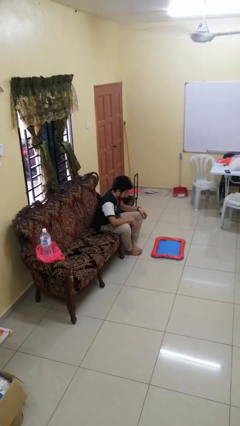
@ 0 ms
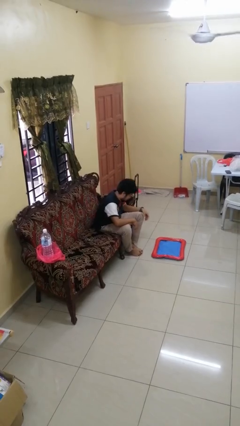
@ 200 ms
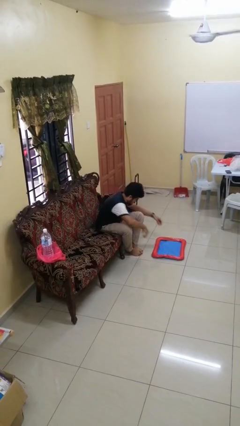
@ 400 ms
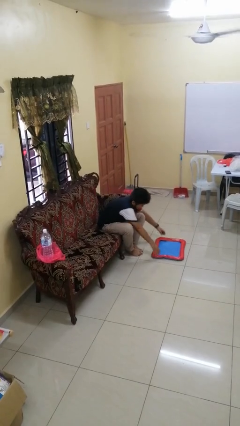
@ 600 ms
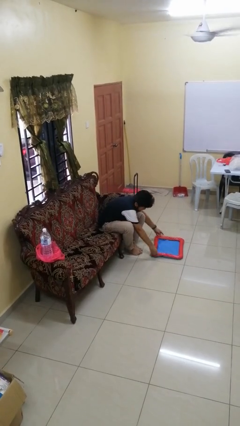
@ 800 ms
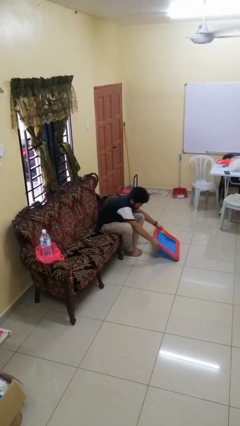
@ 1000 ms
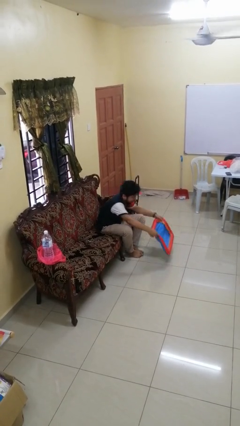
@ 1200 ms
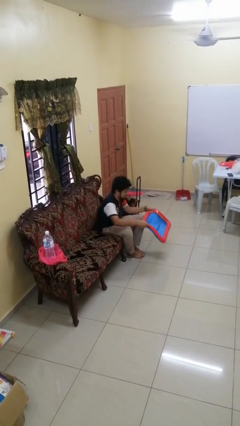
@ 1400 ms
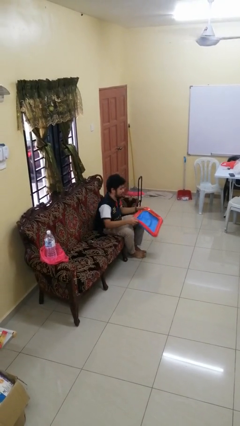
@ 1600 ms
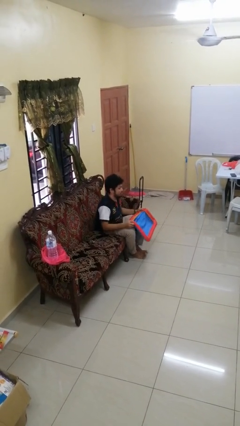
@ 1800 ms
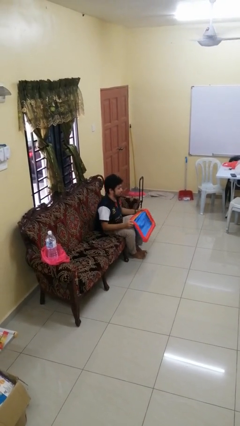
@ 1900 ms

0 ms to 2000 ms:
person picks up object from floor

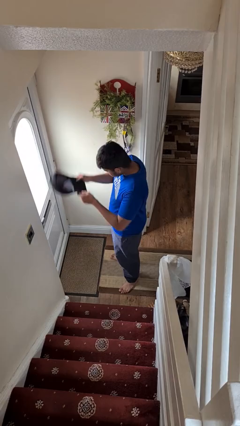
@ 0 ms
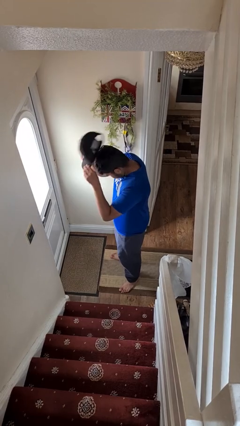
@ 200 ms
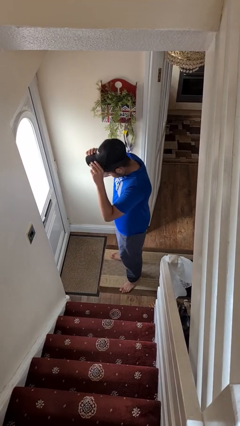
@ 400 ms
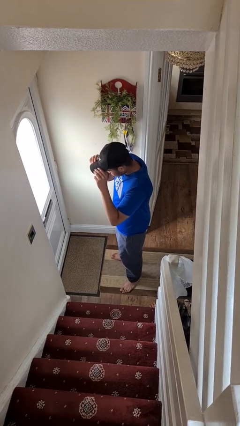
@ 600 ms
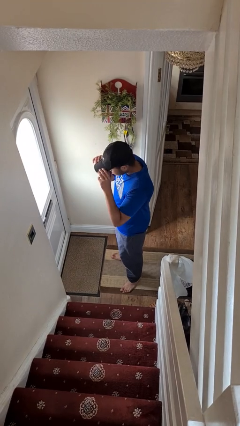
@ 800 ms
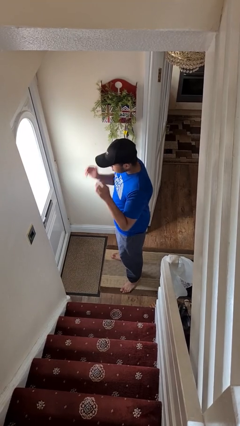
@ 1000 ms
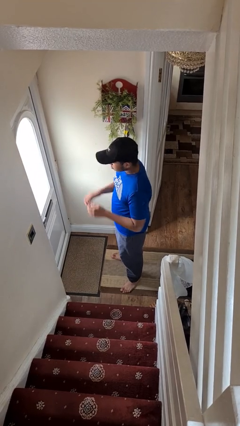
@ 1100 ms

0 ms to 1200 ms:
person puts on hat

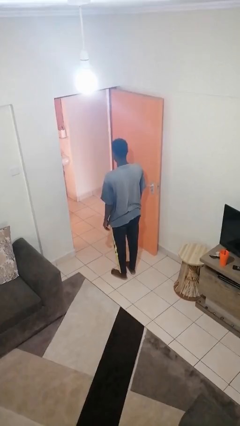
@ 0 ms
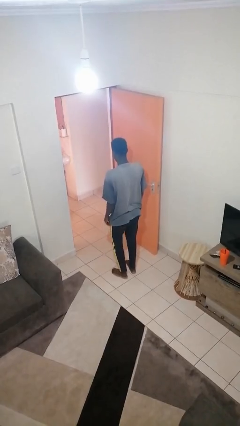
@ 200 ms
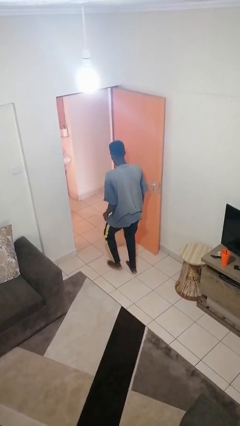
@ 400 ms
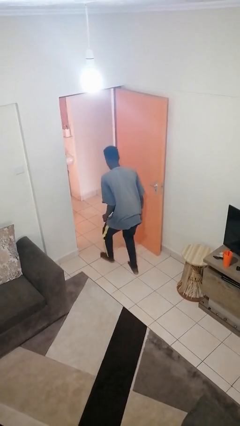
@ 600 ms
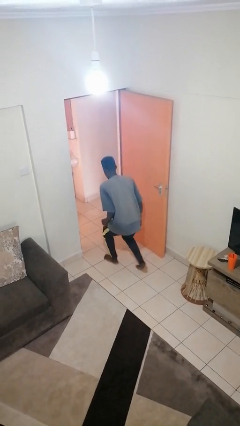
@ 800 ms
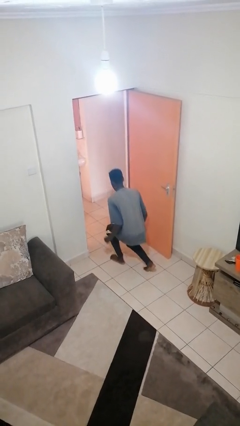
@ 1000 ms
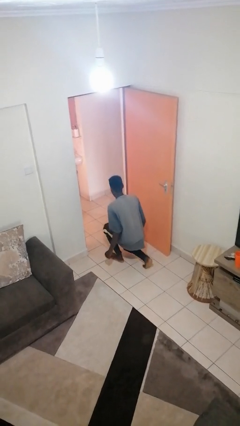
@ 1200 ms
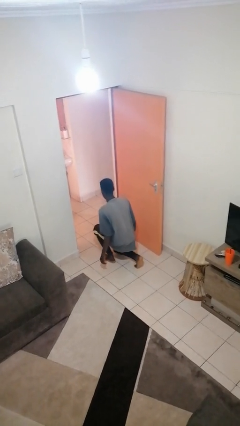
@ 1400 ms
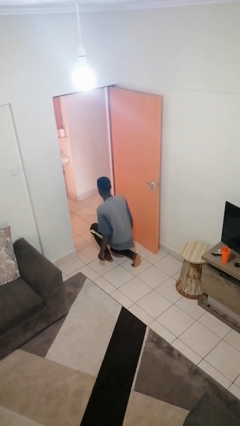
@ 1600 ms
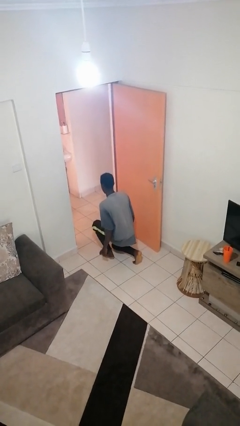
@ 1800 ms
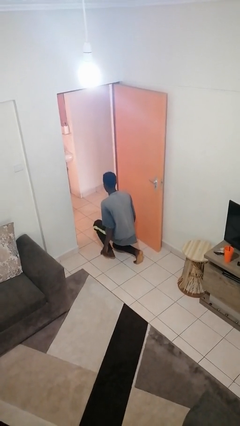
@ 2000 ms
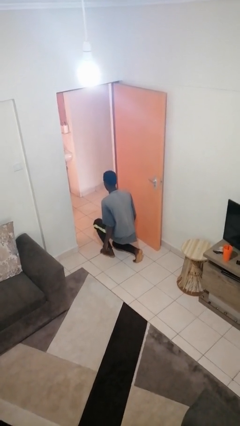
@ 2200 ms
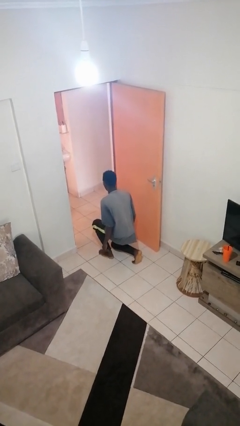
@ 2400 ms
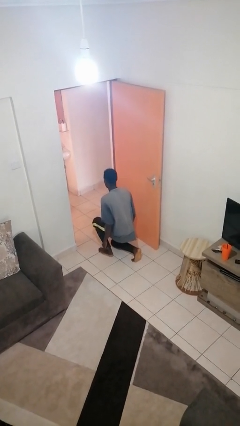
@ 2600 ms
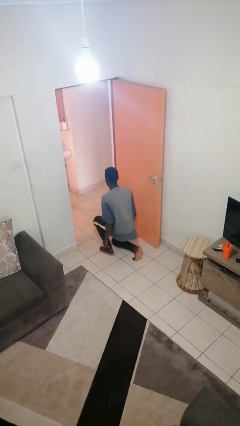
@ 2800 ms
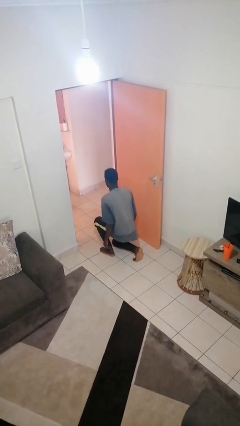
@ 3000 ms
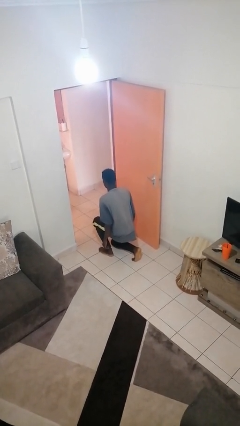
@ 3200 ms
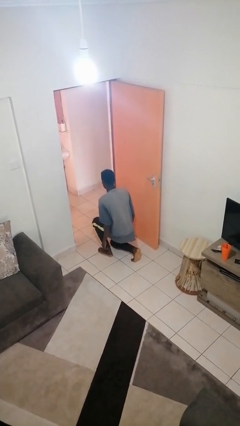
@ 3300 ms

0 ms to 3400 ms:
person kneels

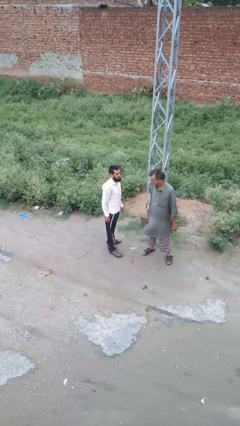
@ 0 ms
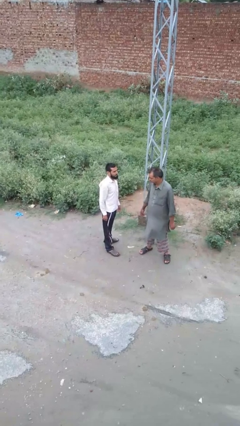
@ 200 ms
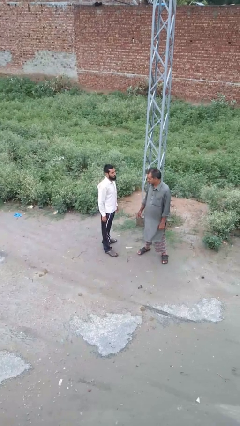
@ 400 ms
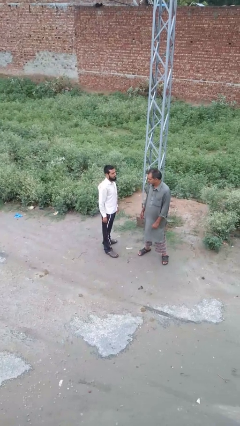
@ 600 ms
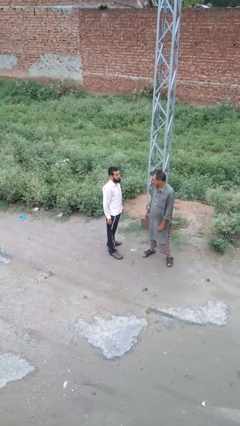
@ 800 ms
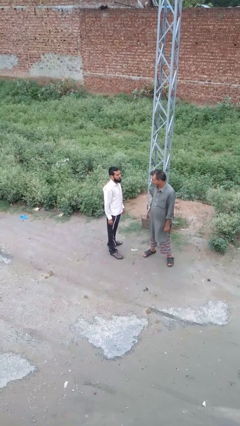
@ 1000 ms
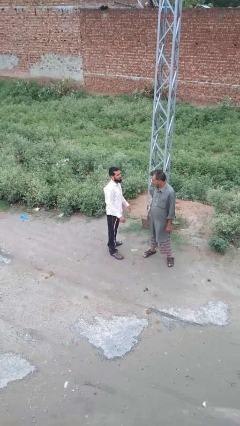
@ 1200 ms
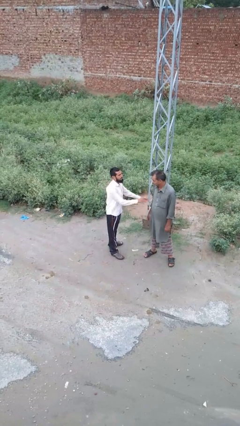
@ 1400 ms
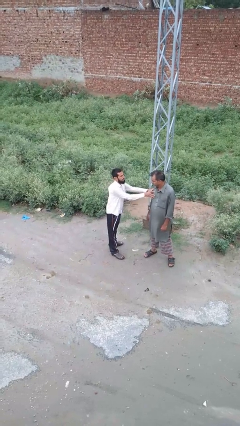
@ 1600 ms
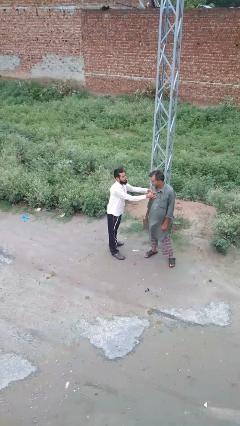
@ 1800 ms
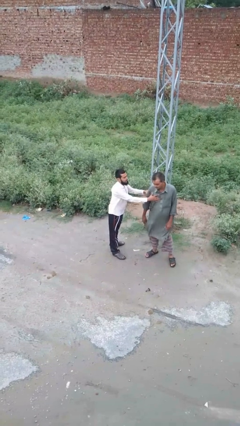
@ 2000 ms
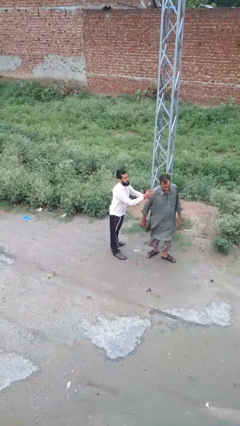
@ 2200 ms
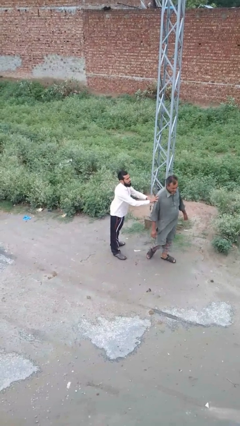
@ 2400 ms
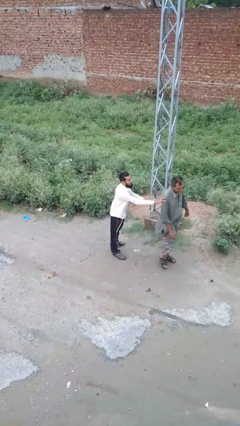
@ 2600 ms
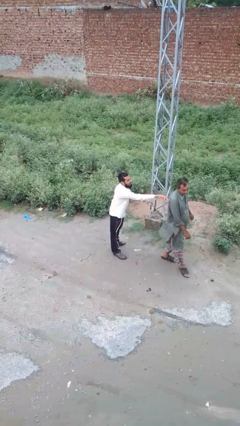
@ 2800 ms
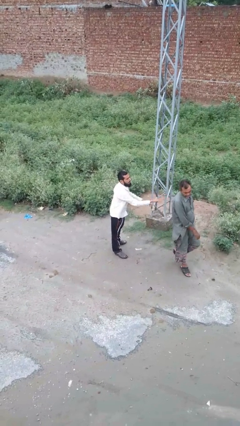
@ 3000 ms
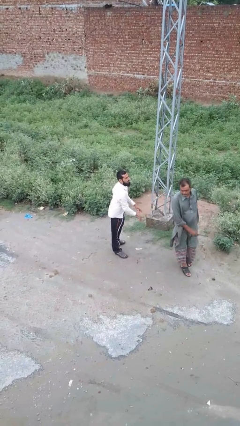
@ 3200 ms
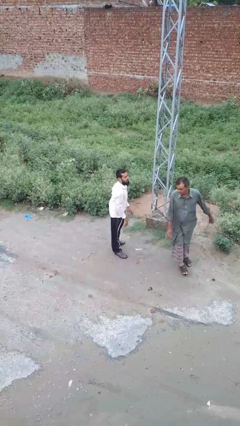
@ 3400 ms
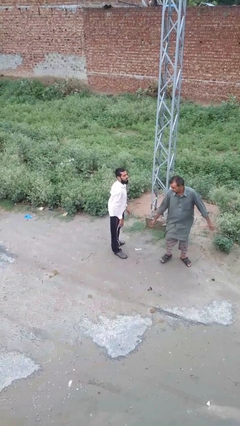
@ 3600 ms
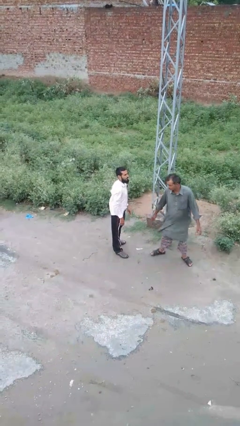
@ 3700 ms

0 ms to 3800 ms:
person shoves person

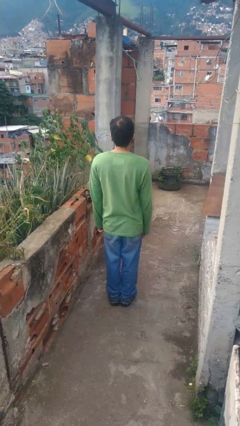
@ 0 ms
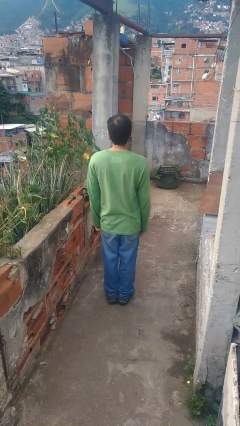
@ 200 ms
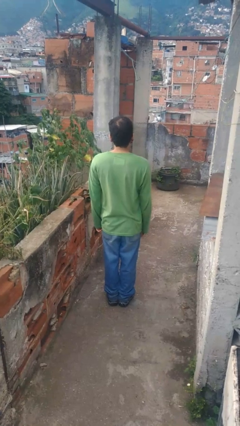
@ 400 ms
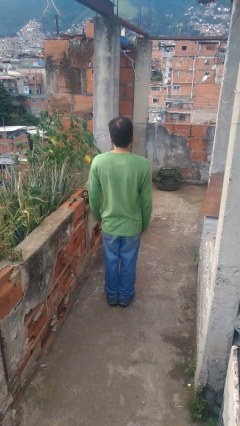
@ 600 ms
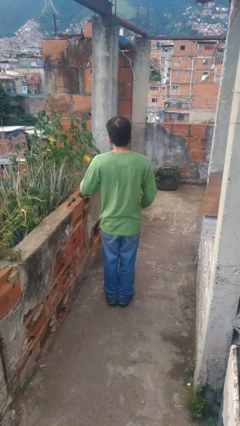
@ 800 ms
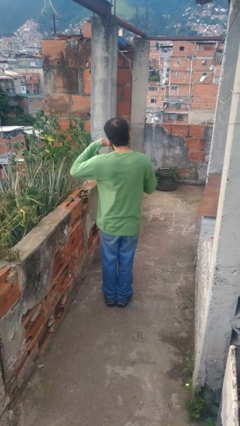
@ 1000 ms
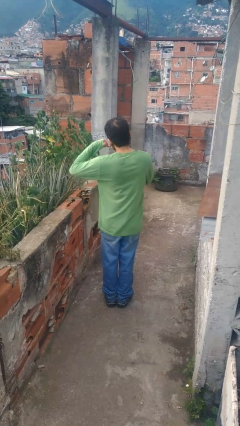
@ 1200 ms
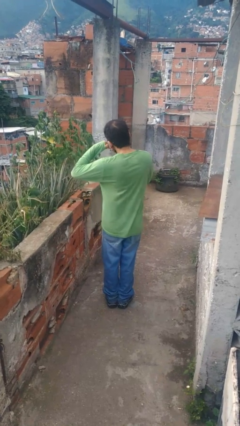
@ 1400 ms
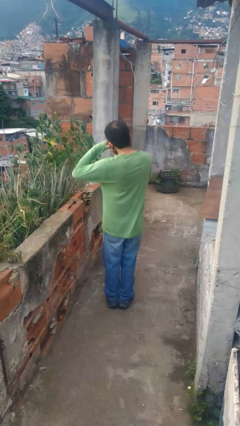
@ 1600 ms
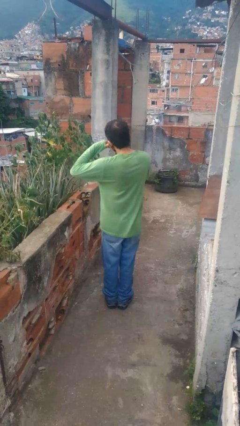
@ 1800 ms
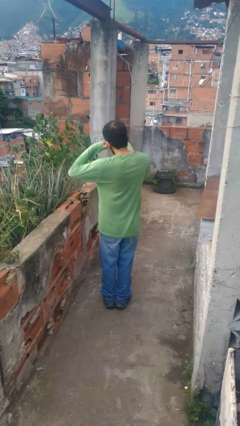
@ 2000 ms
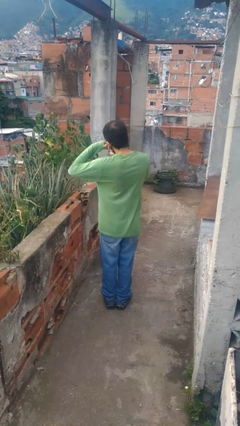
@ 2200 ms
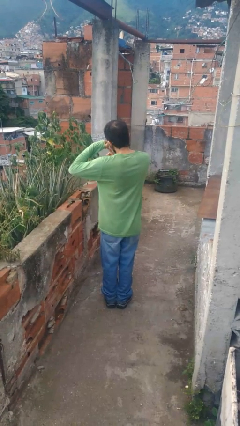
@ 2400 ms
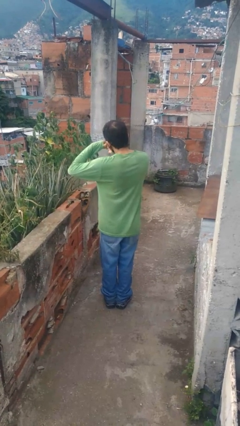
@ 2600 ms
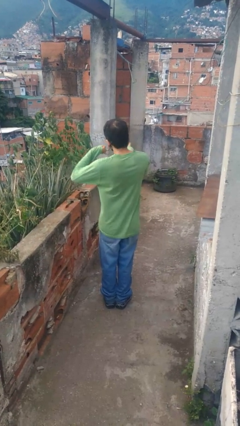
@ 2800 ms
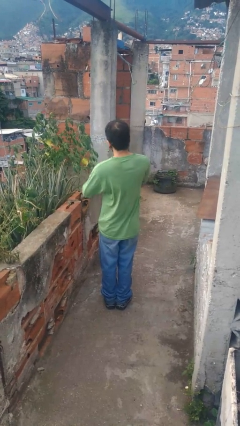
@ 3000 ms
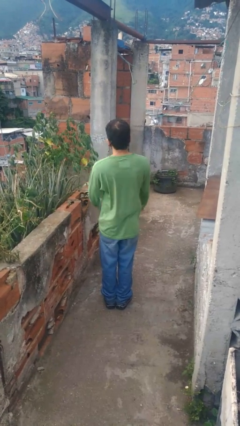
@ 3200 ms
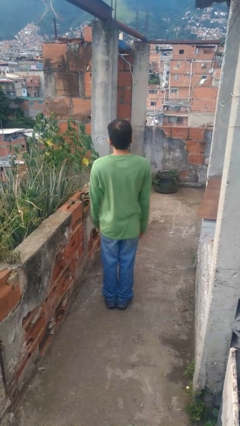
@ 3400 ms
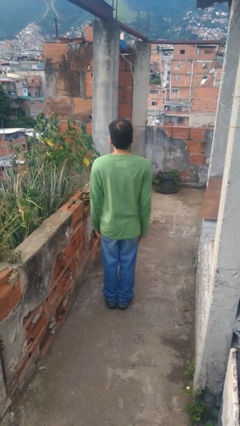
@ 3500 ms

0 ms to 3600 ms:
person gestures call me

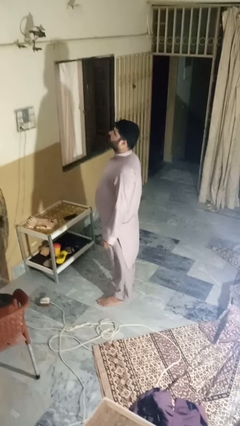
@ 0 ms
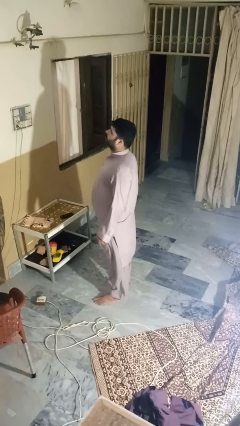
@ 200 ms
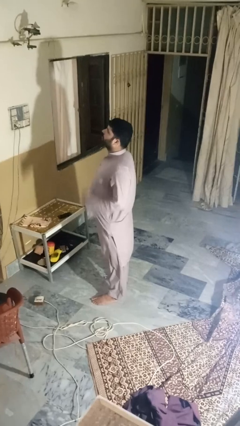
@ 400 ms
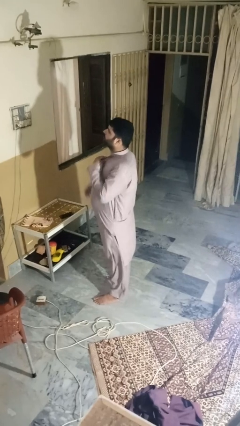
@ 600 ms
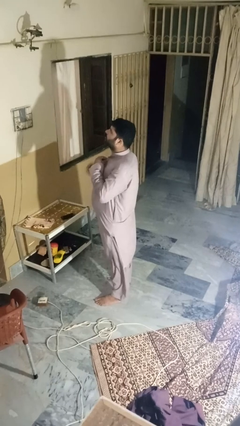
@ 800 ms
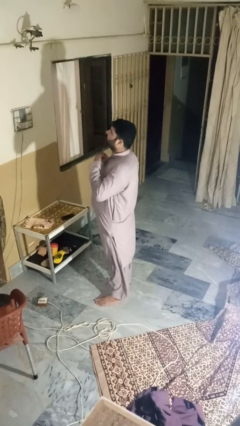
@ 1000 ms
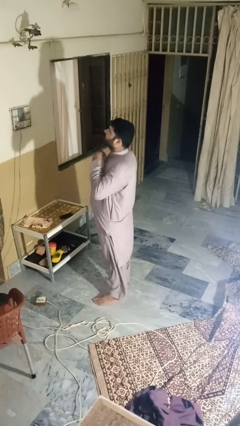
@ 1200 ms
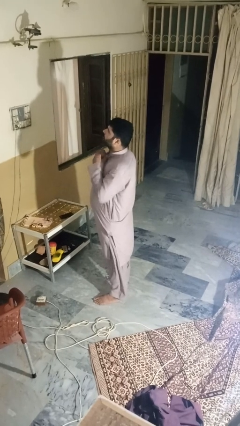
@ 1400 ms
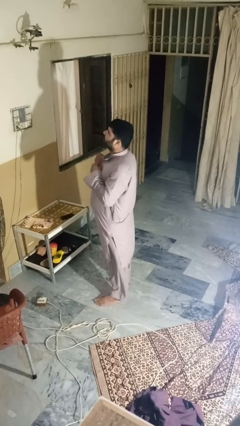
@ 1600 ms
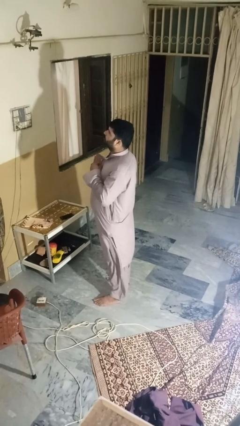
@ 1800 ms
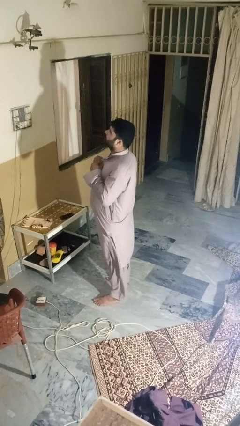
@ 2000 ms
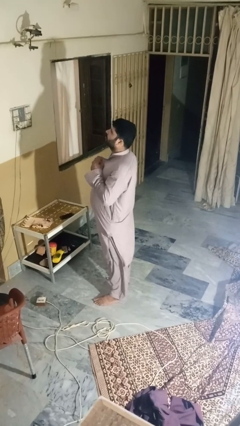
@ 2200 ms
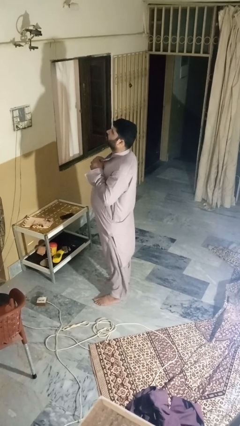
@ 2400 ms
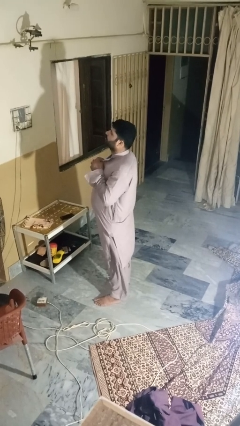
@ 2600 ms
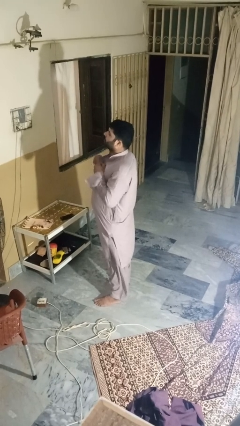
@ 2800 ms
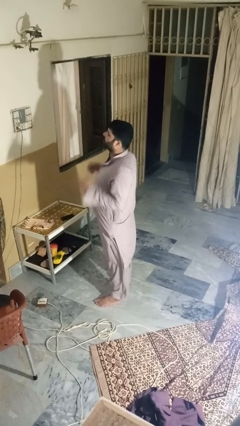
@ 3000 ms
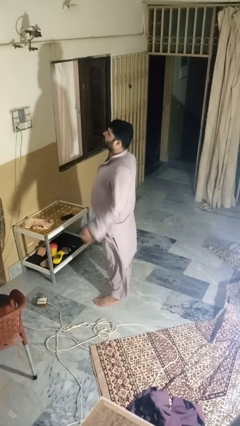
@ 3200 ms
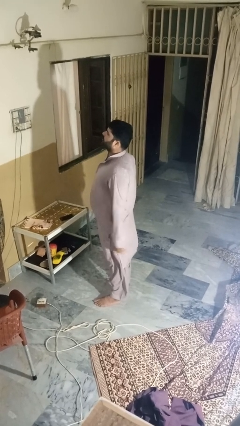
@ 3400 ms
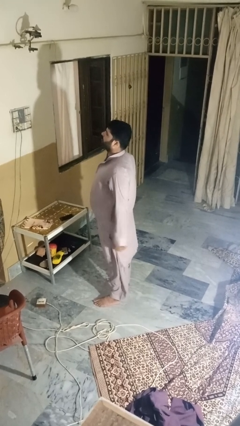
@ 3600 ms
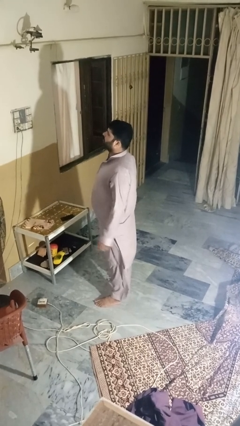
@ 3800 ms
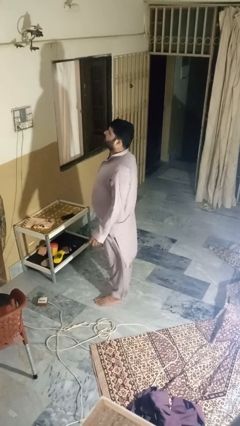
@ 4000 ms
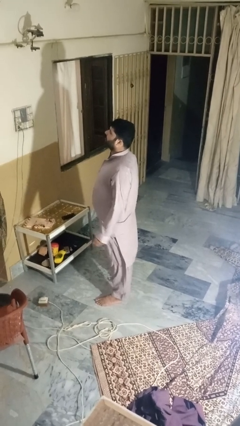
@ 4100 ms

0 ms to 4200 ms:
person unbuttons shirt
